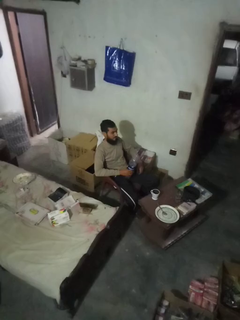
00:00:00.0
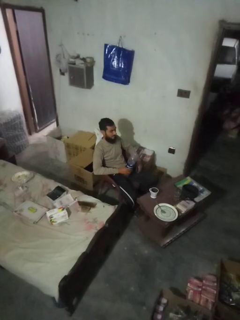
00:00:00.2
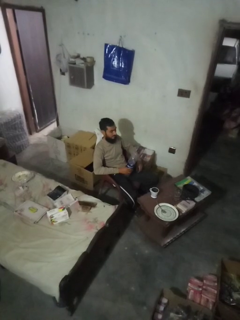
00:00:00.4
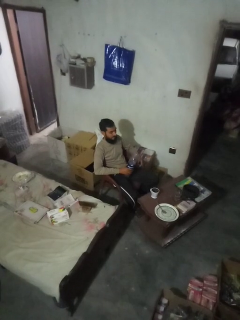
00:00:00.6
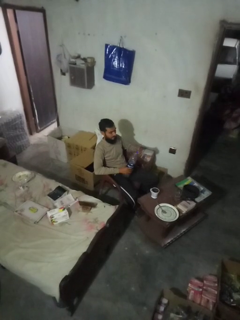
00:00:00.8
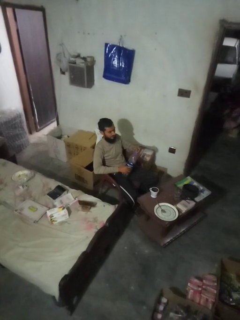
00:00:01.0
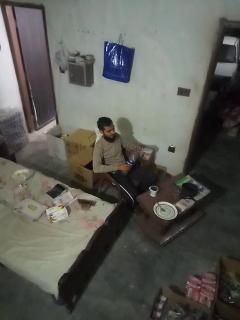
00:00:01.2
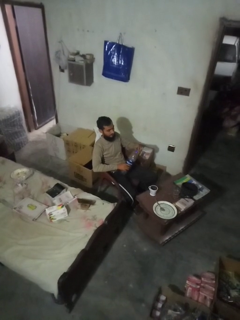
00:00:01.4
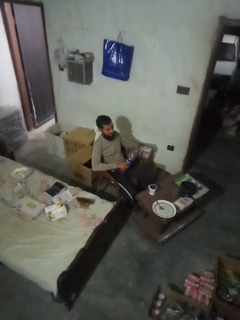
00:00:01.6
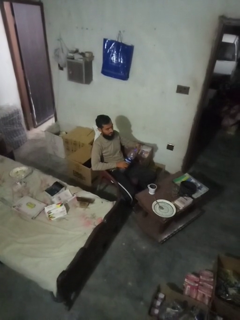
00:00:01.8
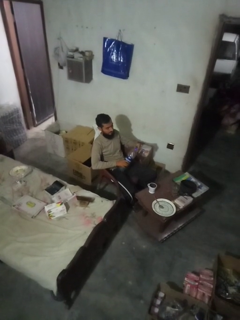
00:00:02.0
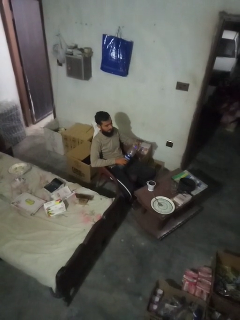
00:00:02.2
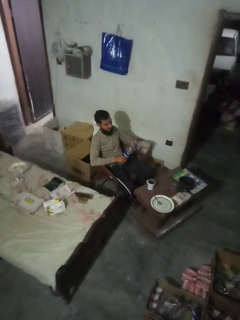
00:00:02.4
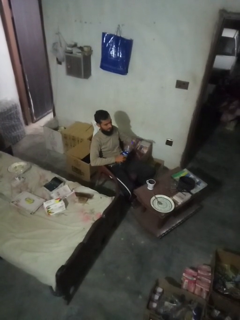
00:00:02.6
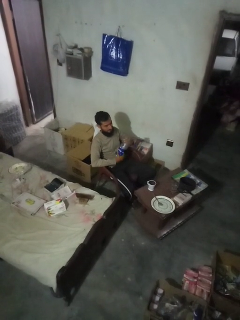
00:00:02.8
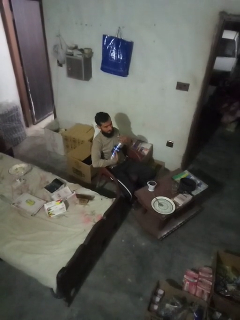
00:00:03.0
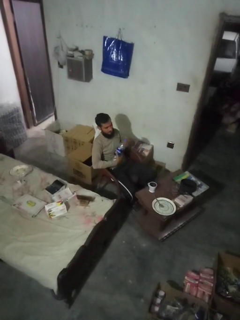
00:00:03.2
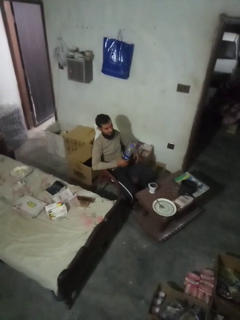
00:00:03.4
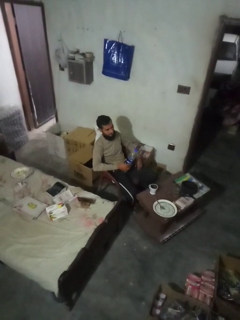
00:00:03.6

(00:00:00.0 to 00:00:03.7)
person screws lid to bottle

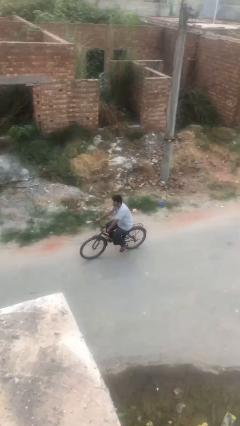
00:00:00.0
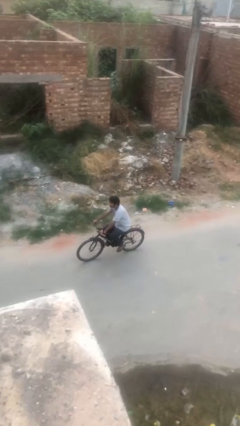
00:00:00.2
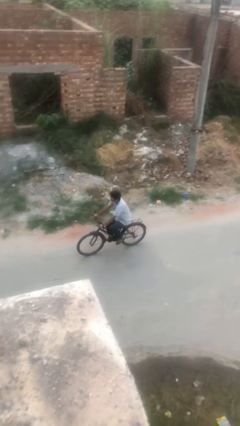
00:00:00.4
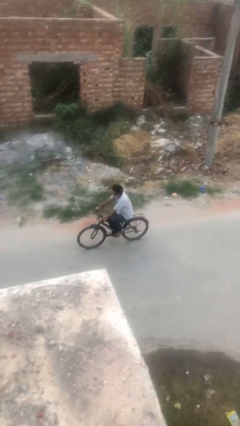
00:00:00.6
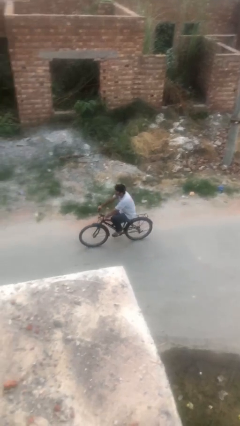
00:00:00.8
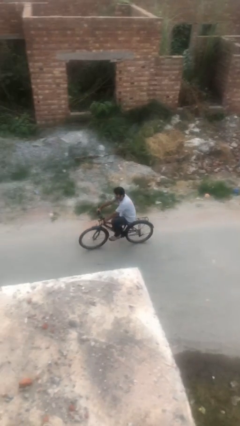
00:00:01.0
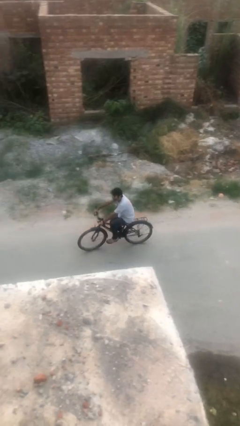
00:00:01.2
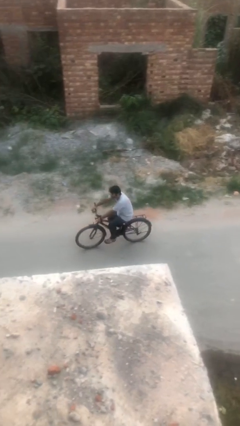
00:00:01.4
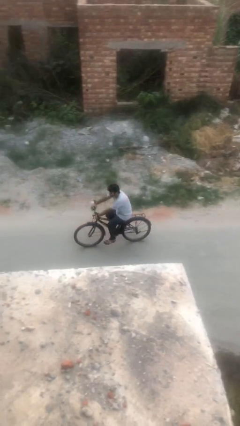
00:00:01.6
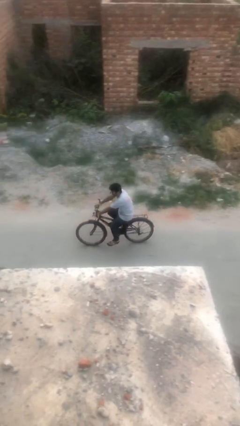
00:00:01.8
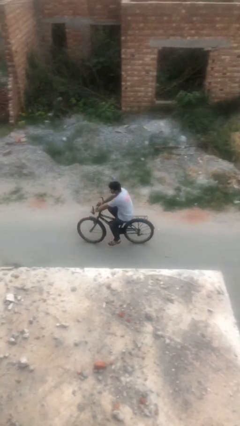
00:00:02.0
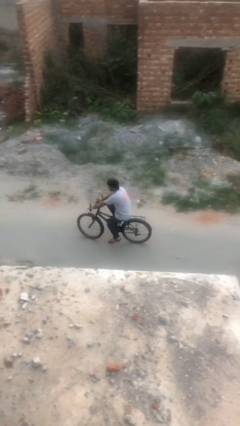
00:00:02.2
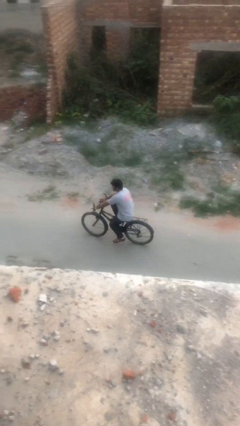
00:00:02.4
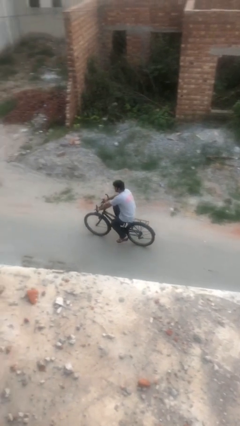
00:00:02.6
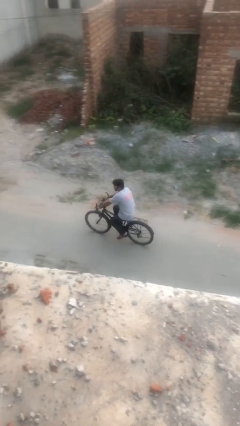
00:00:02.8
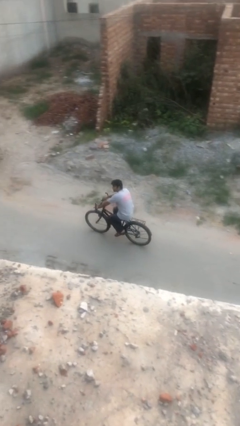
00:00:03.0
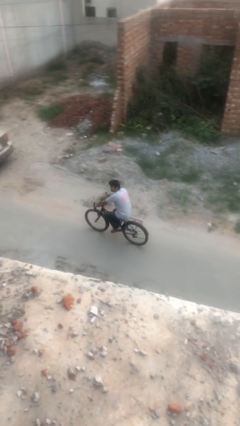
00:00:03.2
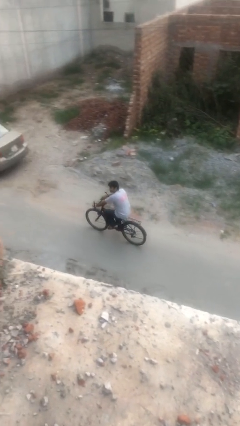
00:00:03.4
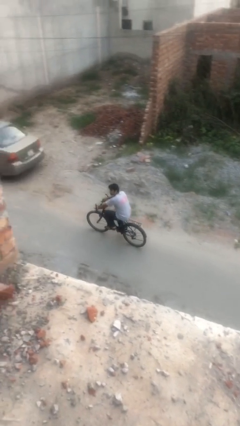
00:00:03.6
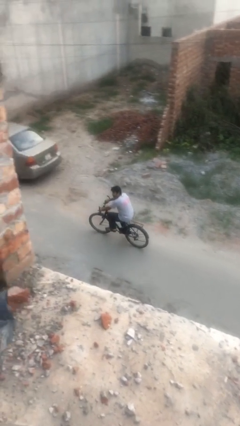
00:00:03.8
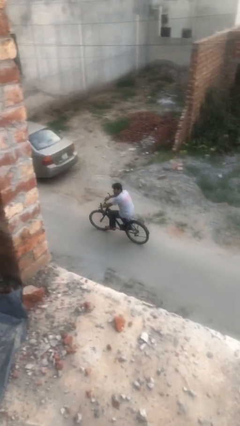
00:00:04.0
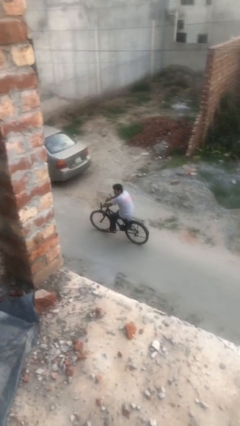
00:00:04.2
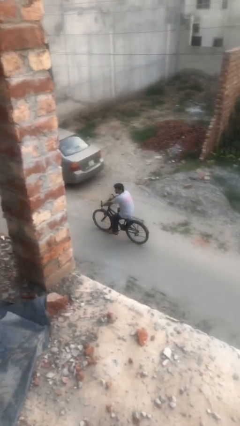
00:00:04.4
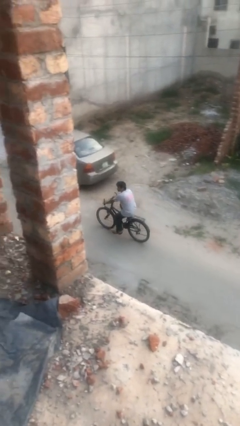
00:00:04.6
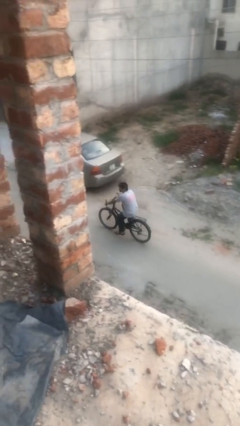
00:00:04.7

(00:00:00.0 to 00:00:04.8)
person rides bicycle

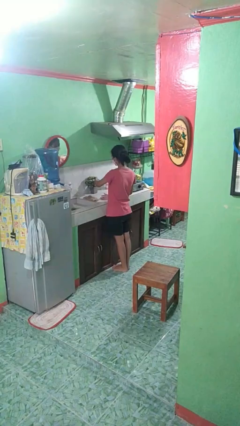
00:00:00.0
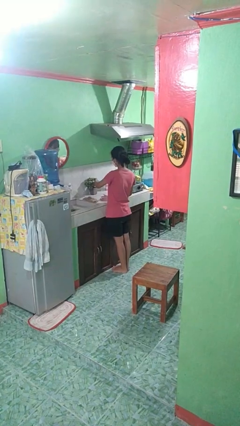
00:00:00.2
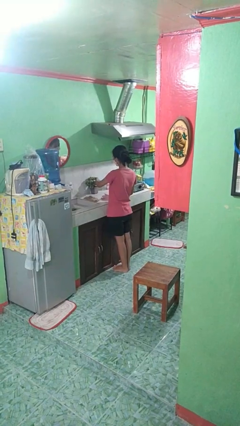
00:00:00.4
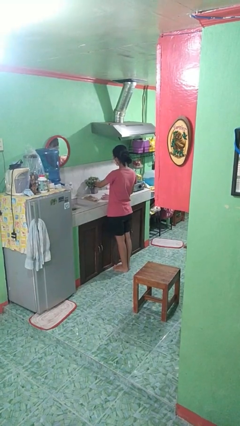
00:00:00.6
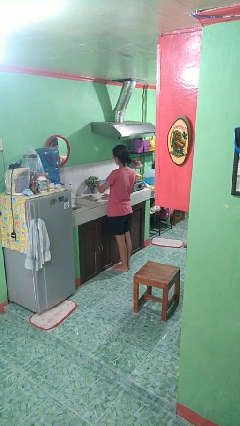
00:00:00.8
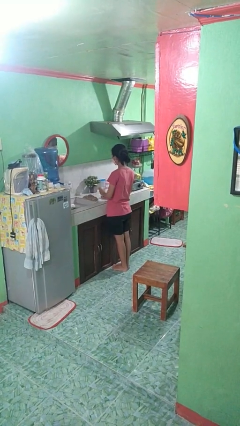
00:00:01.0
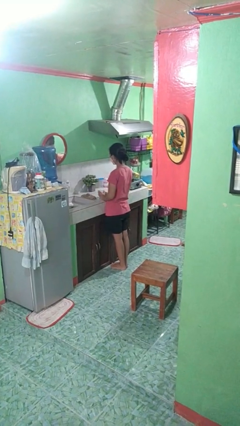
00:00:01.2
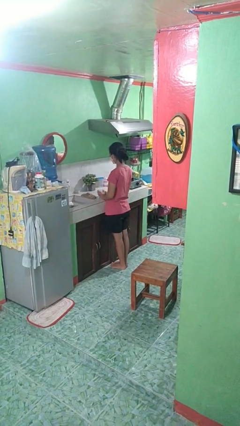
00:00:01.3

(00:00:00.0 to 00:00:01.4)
person waters houseplant

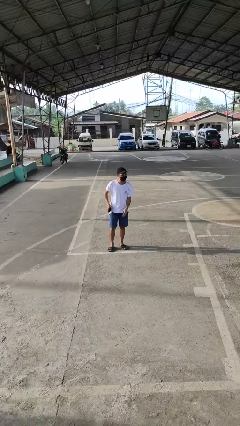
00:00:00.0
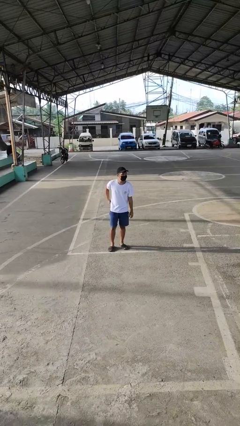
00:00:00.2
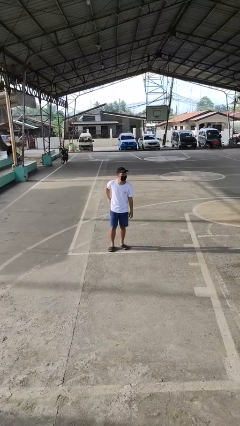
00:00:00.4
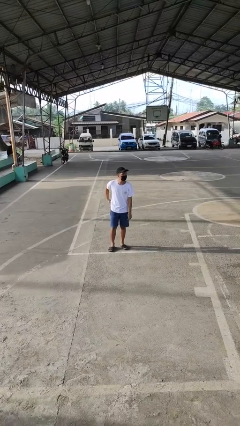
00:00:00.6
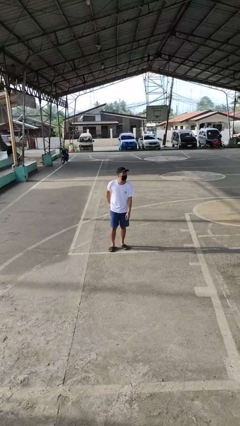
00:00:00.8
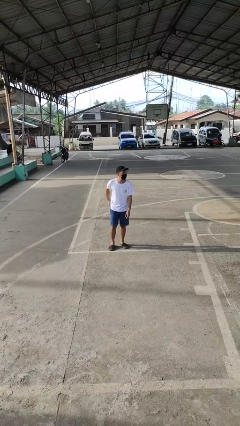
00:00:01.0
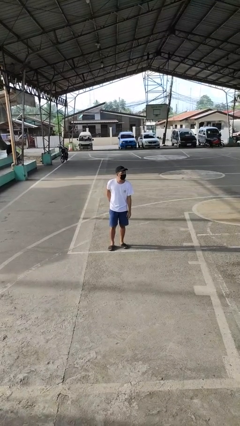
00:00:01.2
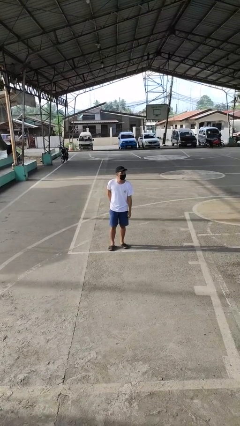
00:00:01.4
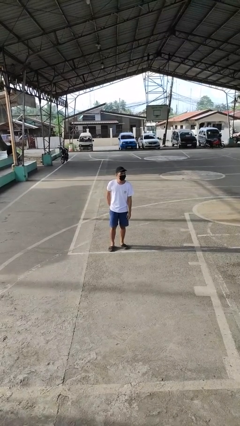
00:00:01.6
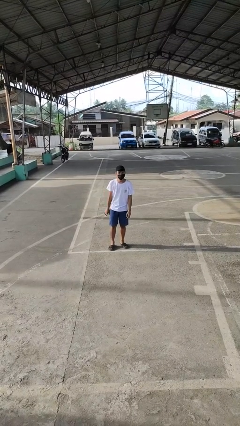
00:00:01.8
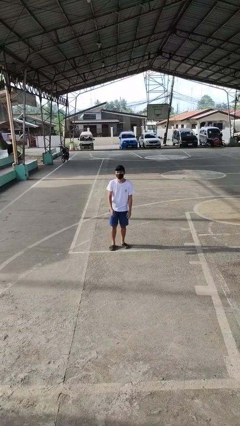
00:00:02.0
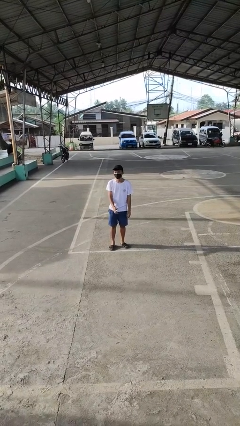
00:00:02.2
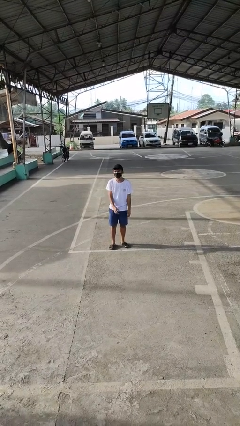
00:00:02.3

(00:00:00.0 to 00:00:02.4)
person puts phone into pocket

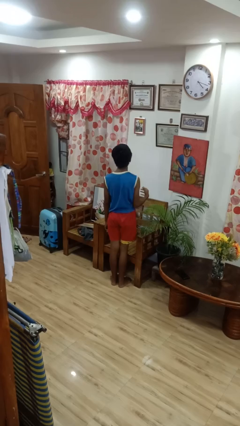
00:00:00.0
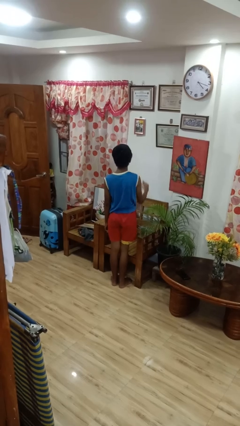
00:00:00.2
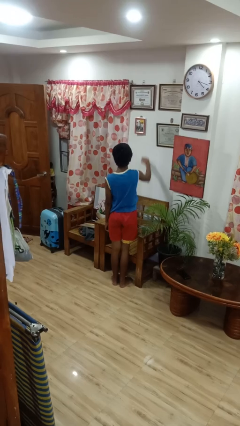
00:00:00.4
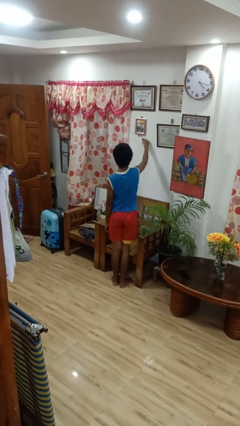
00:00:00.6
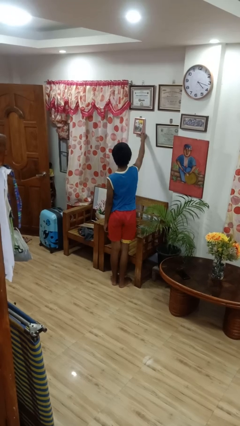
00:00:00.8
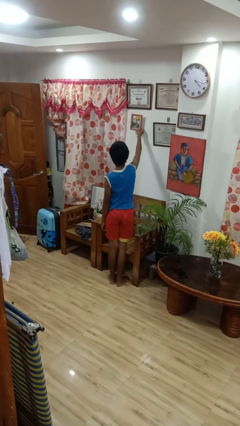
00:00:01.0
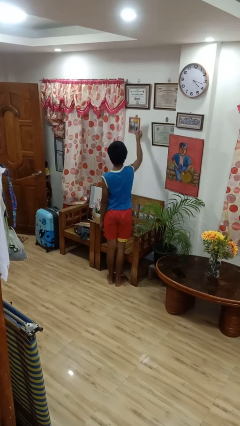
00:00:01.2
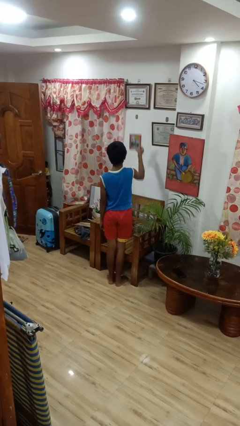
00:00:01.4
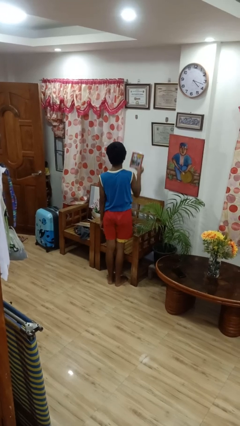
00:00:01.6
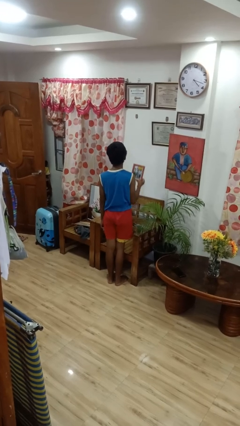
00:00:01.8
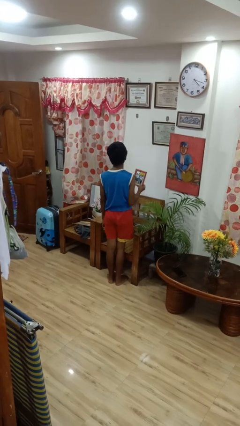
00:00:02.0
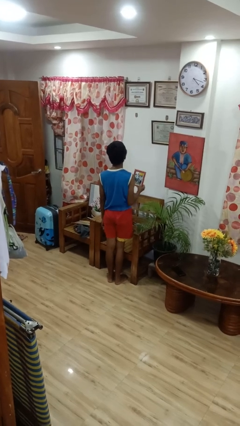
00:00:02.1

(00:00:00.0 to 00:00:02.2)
person takes down picture frame

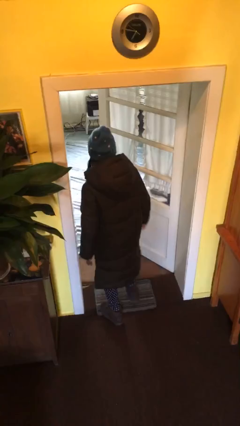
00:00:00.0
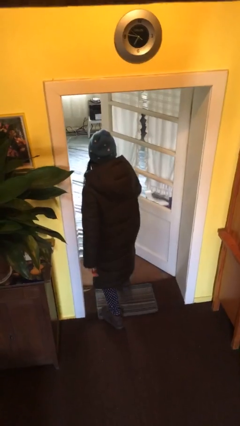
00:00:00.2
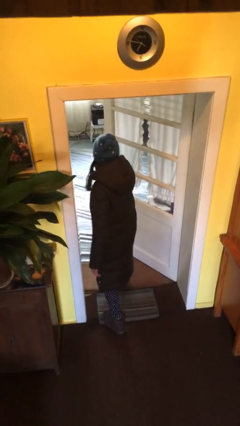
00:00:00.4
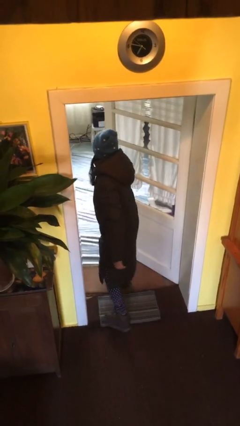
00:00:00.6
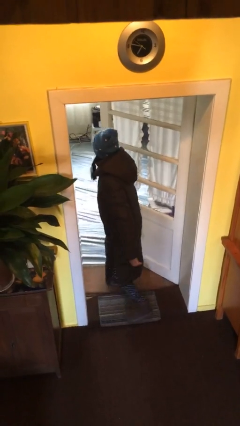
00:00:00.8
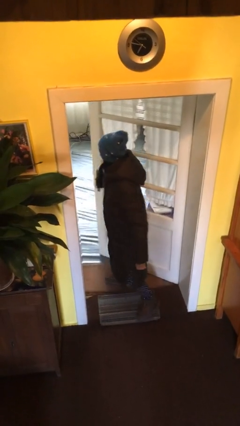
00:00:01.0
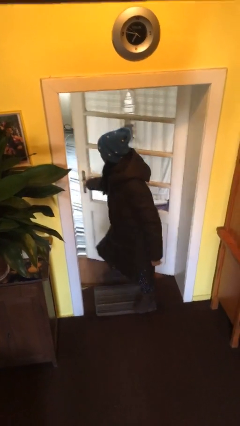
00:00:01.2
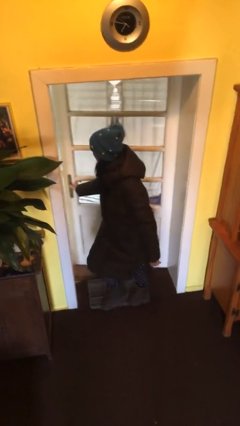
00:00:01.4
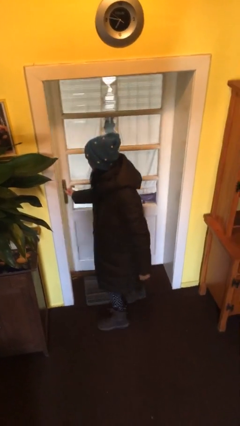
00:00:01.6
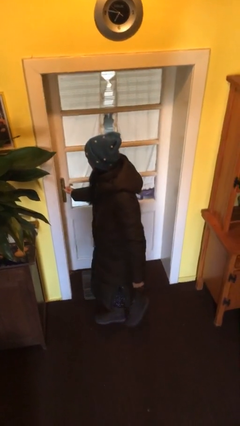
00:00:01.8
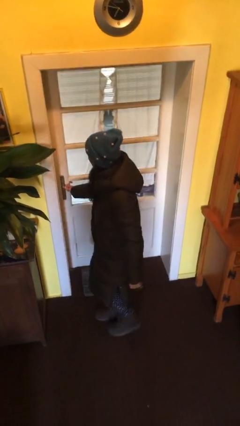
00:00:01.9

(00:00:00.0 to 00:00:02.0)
person closes facility door

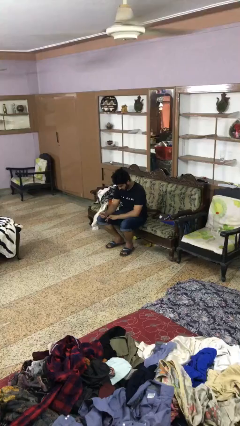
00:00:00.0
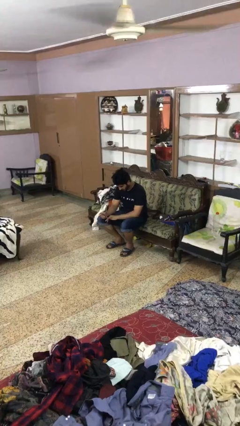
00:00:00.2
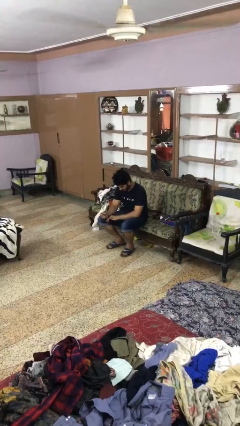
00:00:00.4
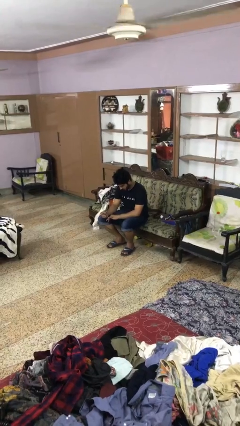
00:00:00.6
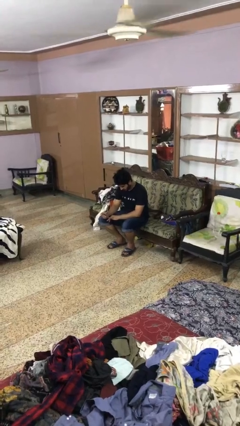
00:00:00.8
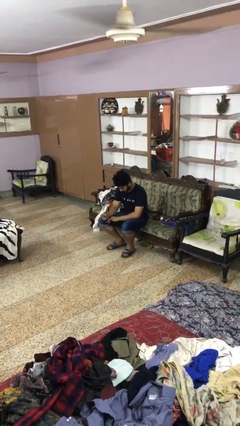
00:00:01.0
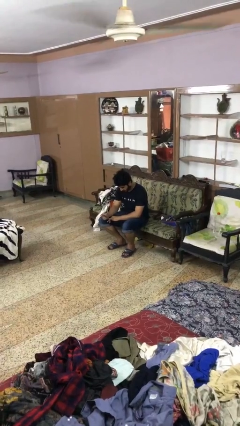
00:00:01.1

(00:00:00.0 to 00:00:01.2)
person clips fingernails

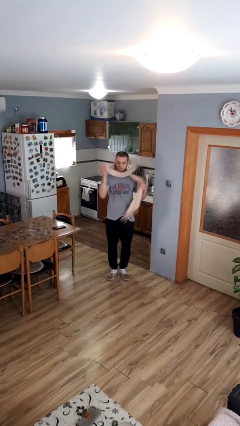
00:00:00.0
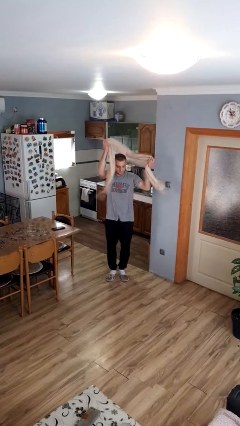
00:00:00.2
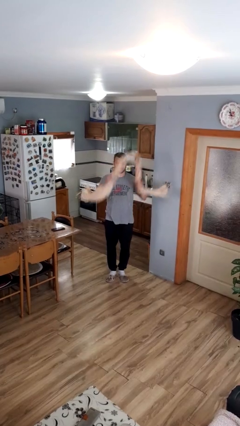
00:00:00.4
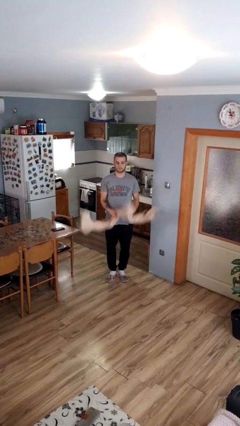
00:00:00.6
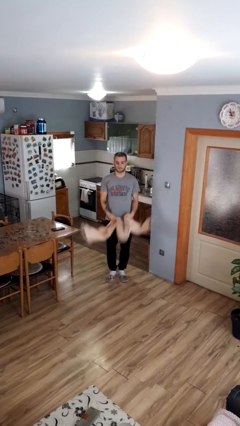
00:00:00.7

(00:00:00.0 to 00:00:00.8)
person takes off scarf
